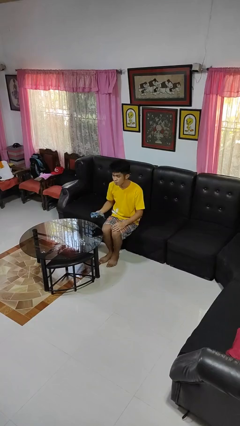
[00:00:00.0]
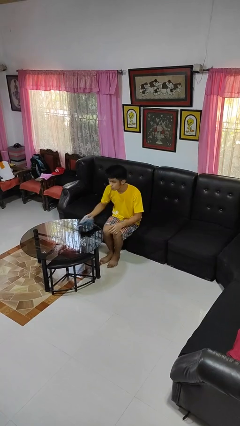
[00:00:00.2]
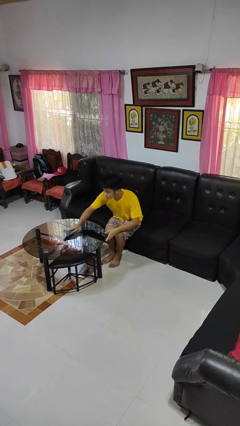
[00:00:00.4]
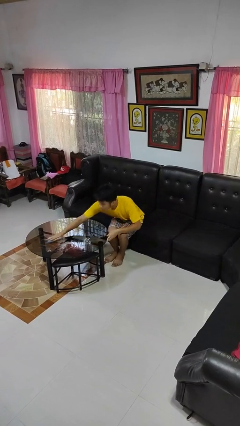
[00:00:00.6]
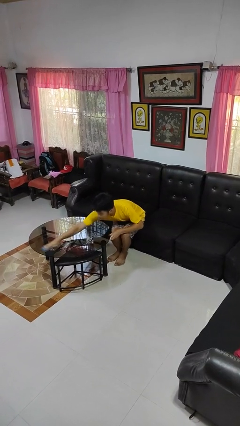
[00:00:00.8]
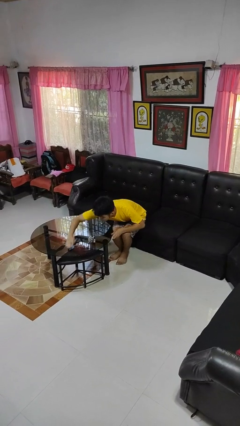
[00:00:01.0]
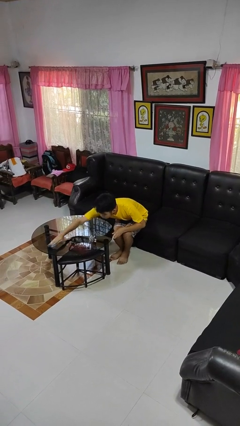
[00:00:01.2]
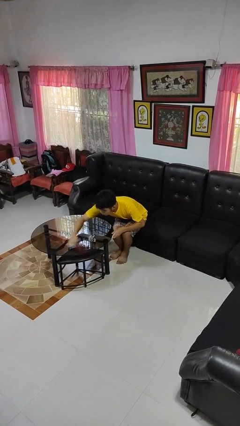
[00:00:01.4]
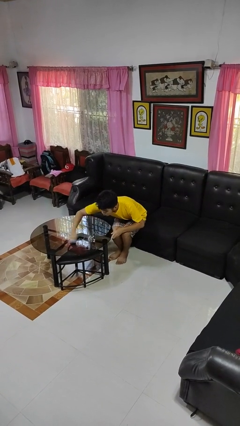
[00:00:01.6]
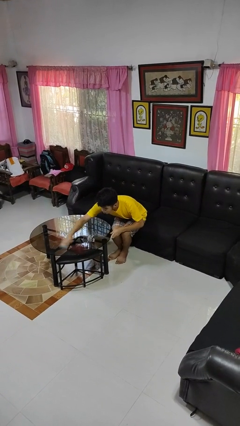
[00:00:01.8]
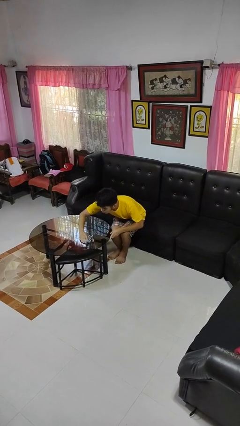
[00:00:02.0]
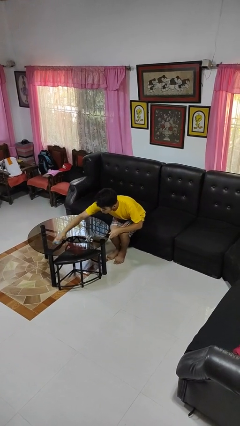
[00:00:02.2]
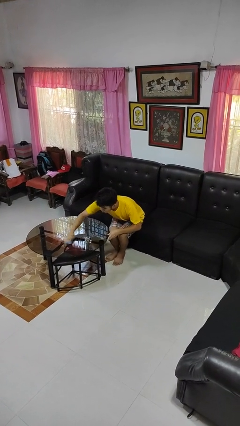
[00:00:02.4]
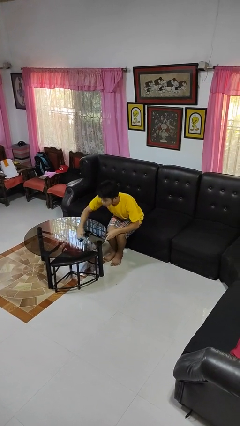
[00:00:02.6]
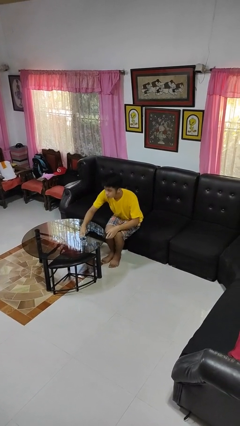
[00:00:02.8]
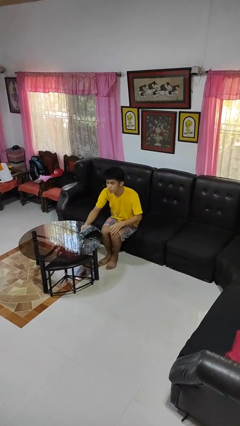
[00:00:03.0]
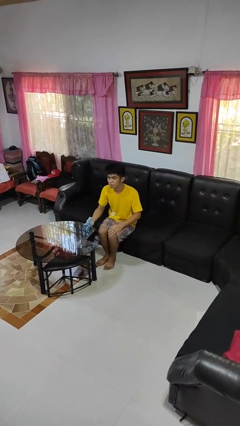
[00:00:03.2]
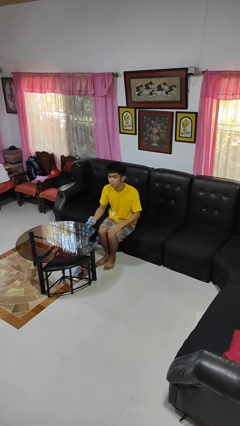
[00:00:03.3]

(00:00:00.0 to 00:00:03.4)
person cleans table with rag

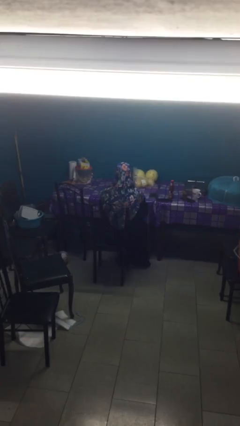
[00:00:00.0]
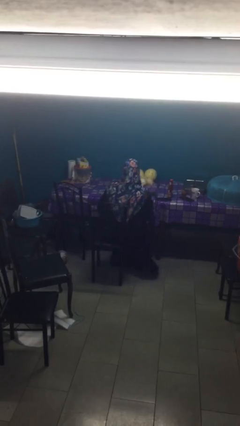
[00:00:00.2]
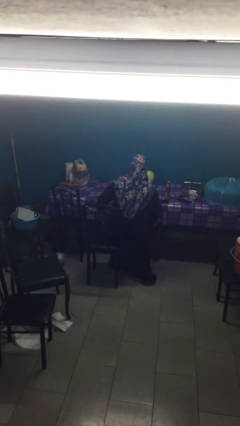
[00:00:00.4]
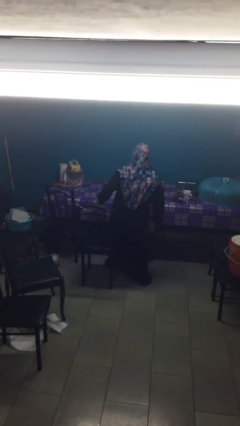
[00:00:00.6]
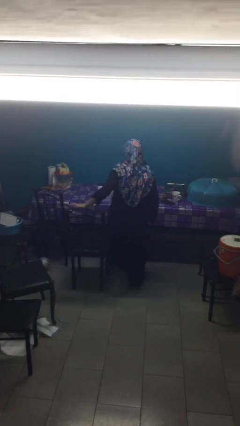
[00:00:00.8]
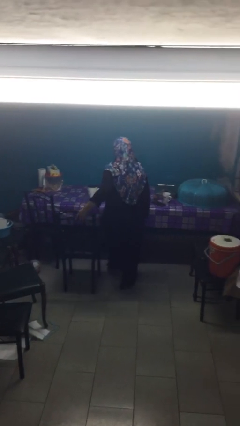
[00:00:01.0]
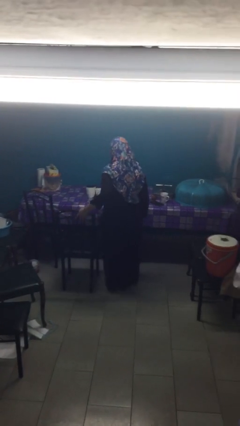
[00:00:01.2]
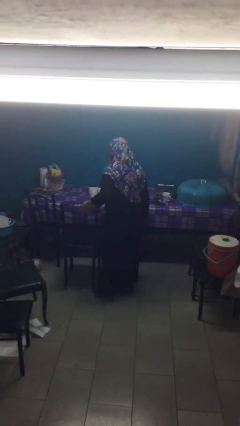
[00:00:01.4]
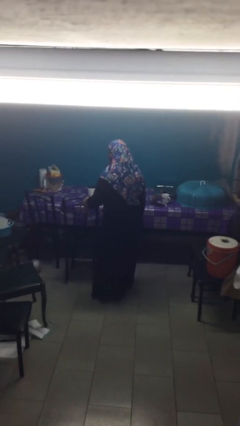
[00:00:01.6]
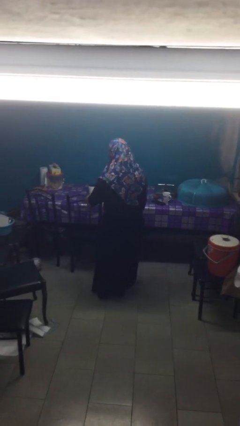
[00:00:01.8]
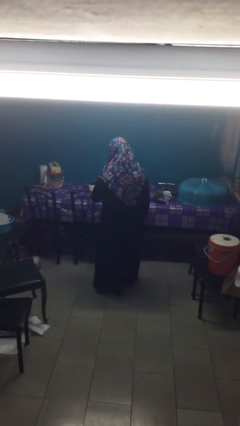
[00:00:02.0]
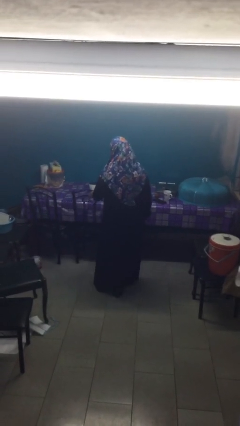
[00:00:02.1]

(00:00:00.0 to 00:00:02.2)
person stands up

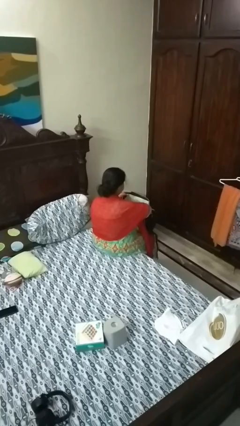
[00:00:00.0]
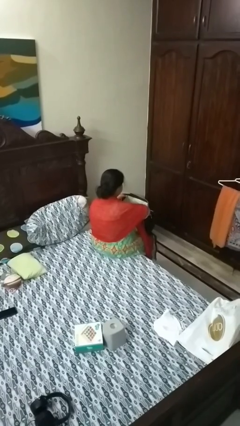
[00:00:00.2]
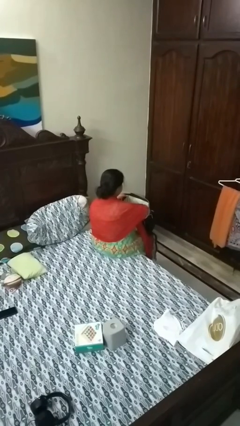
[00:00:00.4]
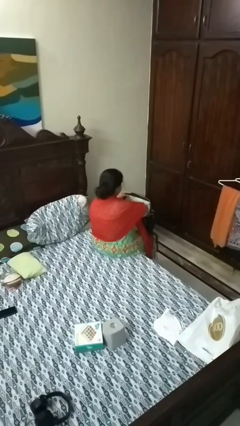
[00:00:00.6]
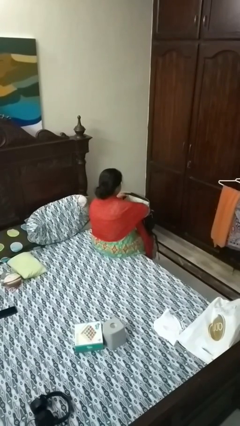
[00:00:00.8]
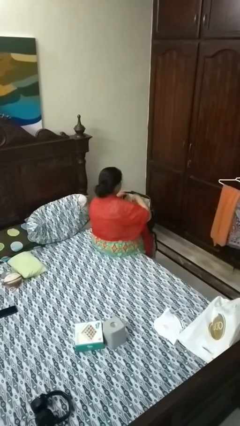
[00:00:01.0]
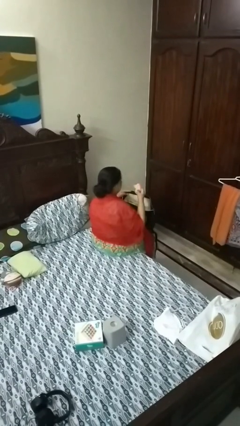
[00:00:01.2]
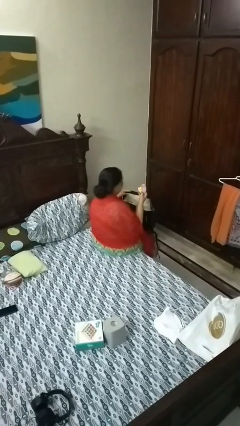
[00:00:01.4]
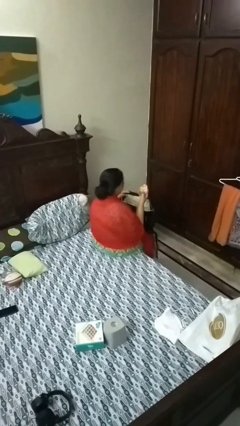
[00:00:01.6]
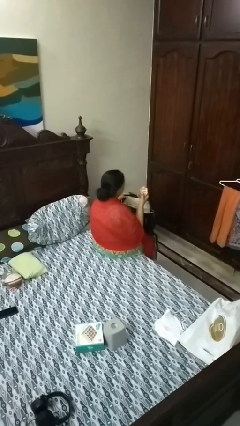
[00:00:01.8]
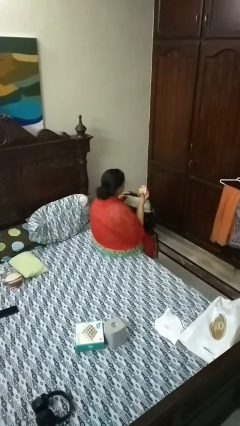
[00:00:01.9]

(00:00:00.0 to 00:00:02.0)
person takes object from backpack

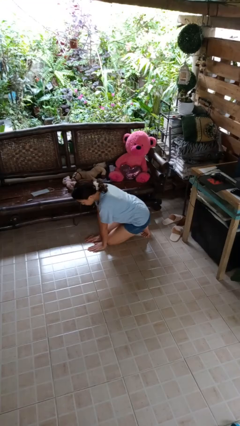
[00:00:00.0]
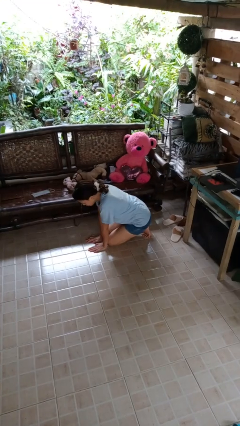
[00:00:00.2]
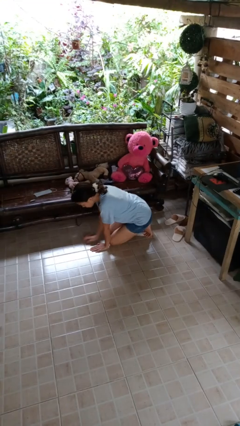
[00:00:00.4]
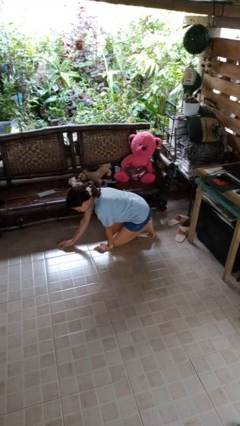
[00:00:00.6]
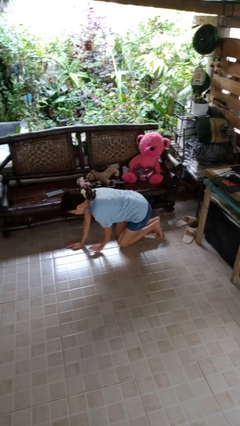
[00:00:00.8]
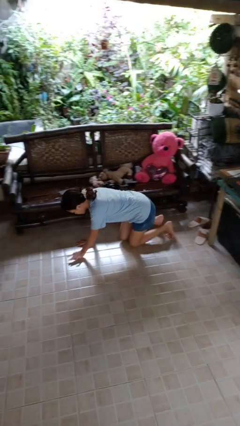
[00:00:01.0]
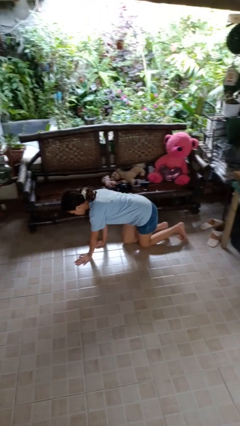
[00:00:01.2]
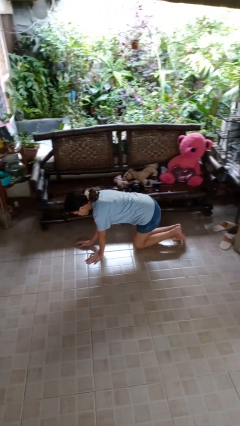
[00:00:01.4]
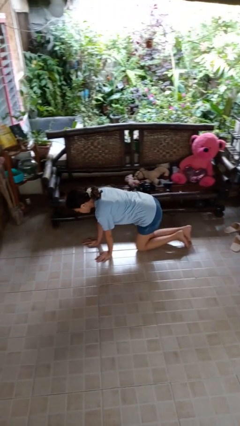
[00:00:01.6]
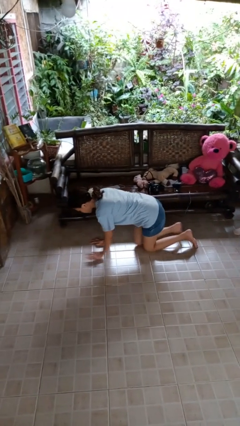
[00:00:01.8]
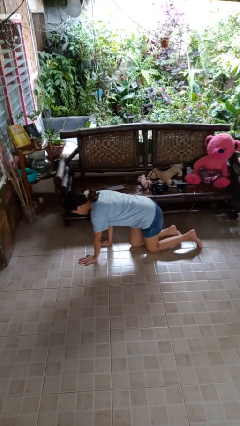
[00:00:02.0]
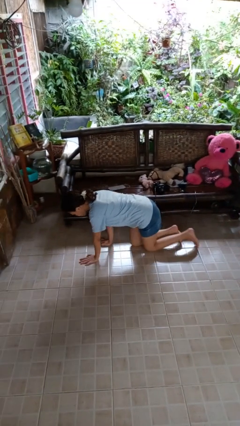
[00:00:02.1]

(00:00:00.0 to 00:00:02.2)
person crawls

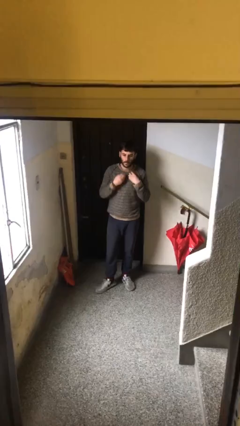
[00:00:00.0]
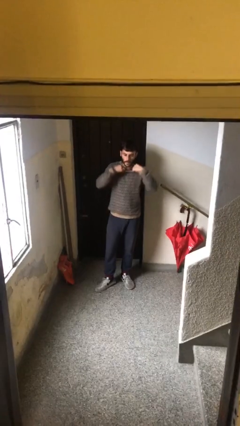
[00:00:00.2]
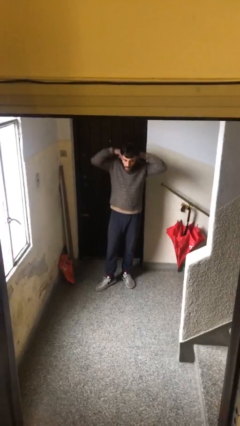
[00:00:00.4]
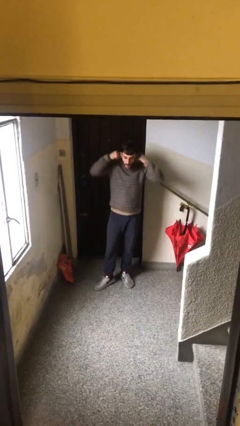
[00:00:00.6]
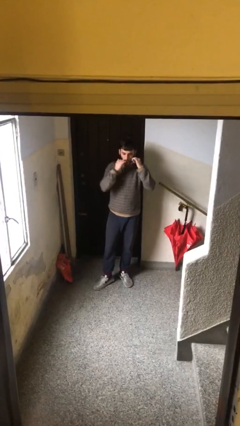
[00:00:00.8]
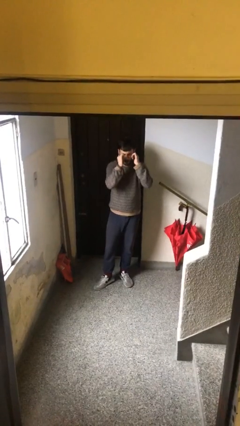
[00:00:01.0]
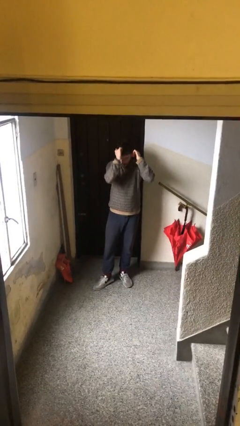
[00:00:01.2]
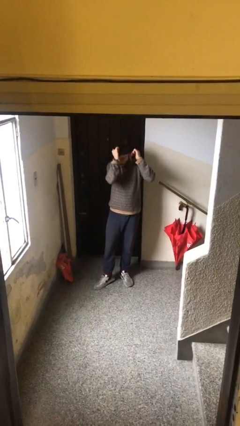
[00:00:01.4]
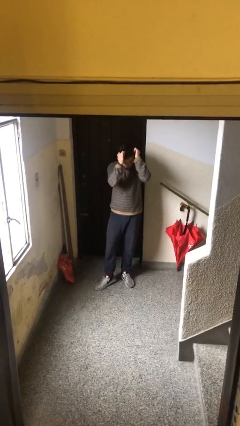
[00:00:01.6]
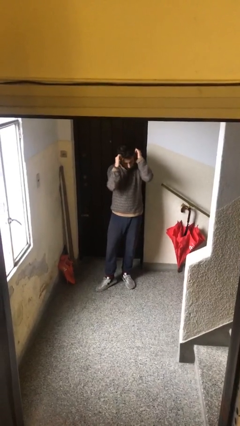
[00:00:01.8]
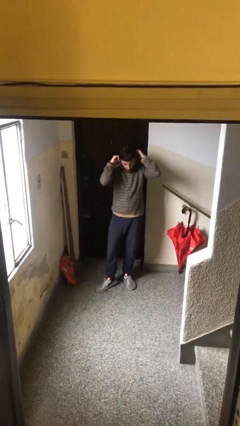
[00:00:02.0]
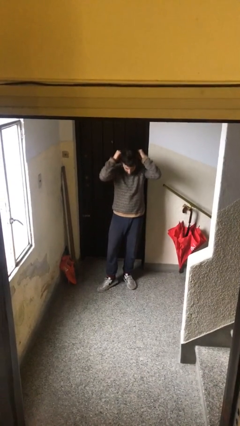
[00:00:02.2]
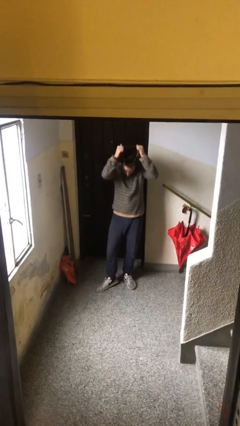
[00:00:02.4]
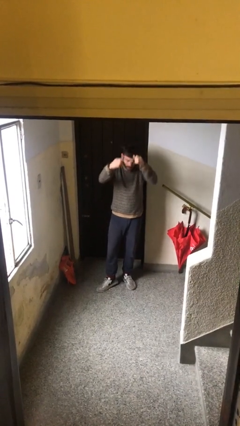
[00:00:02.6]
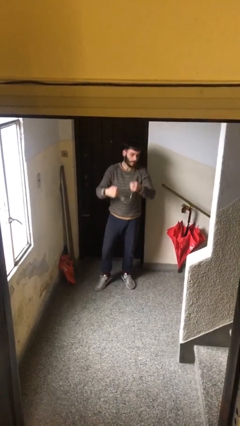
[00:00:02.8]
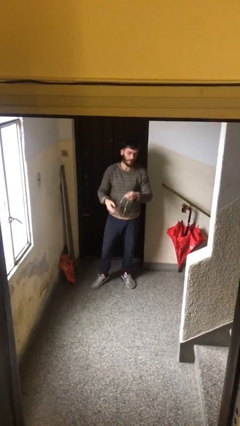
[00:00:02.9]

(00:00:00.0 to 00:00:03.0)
person takes off necklace

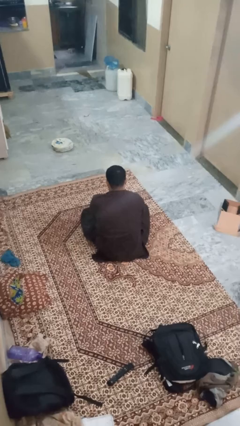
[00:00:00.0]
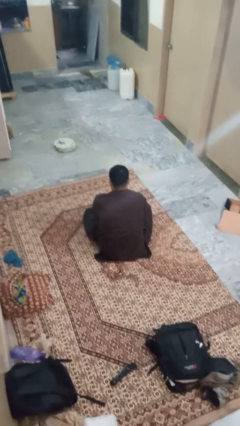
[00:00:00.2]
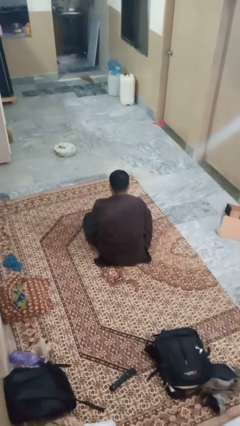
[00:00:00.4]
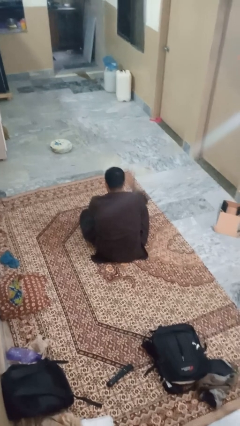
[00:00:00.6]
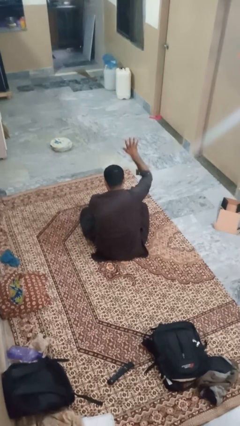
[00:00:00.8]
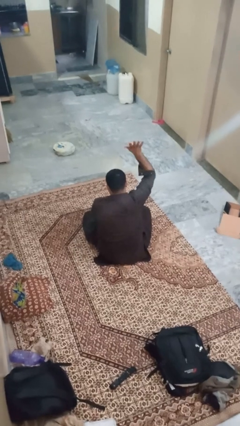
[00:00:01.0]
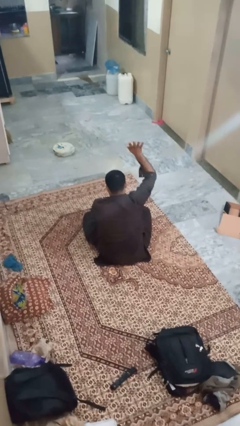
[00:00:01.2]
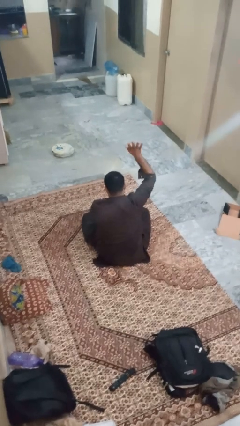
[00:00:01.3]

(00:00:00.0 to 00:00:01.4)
person gestures number five

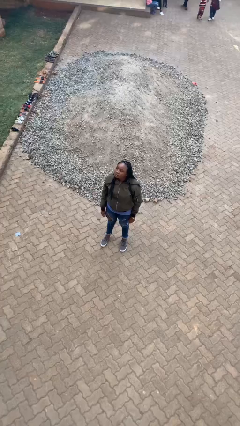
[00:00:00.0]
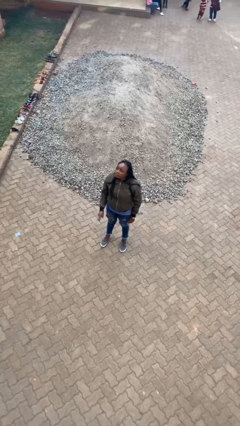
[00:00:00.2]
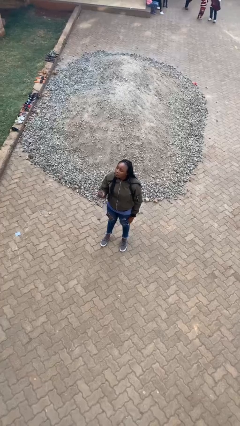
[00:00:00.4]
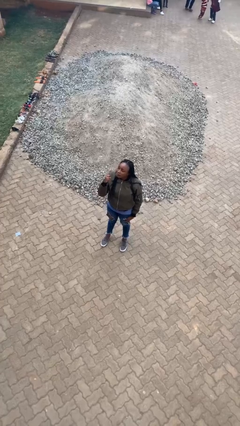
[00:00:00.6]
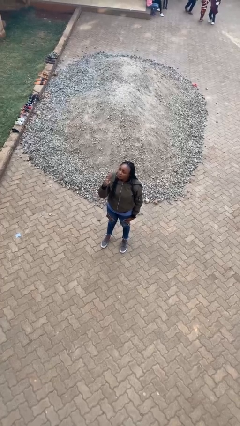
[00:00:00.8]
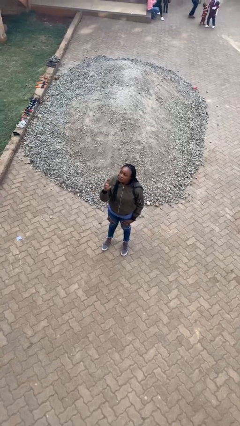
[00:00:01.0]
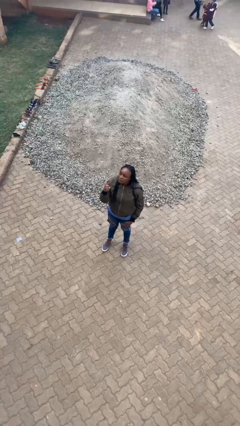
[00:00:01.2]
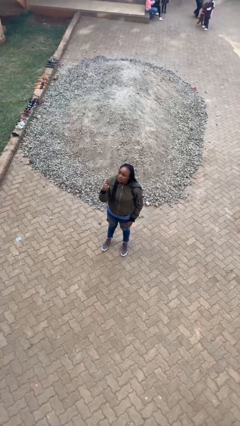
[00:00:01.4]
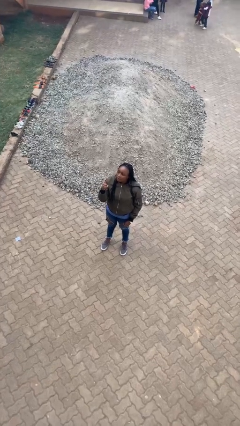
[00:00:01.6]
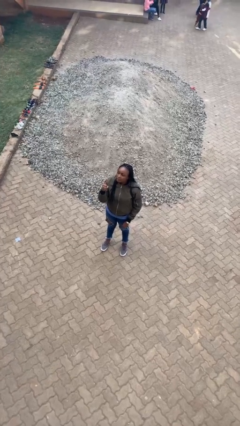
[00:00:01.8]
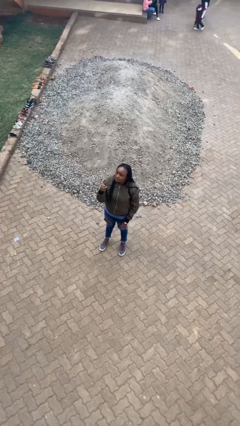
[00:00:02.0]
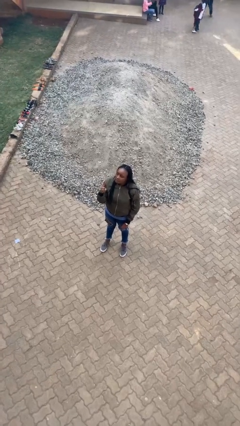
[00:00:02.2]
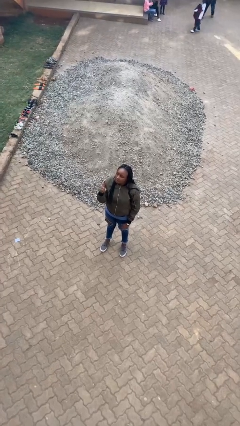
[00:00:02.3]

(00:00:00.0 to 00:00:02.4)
person gestures number one

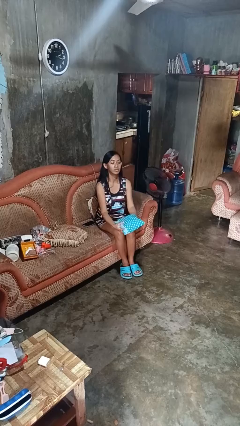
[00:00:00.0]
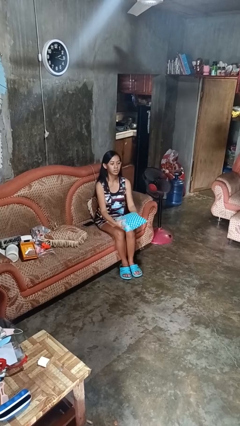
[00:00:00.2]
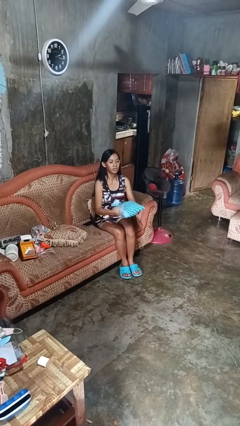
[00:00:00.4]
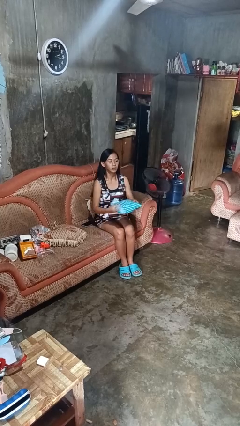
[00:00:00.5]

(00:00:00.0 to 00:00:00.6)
person catches dropped object
